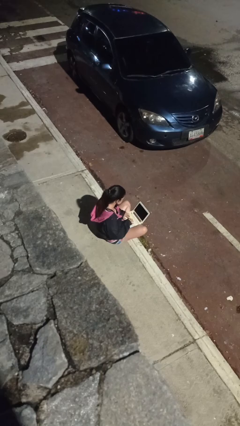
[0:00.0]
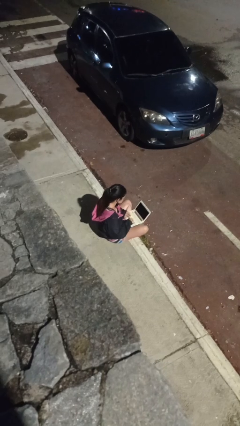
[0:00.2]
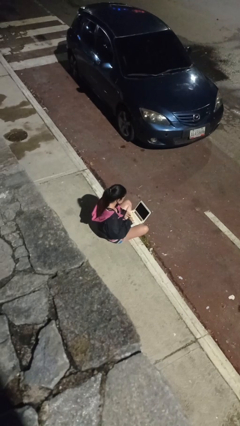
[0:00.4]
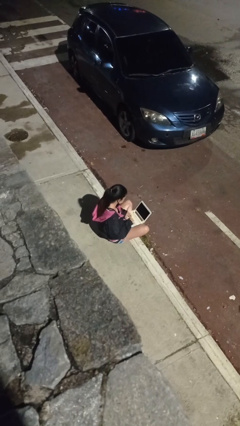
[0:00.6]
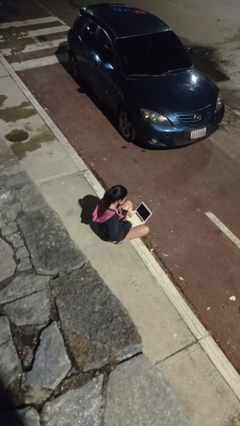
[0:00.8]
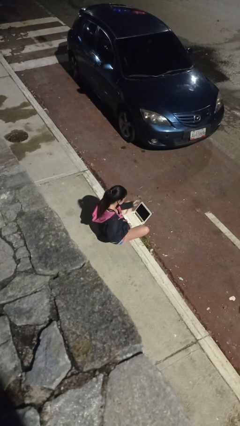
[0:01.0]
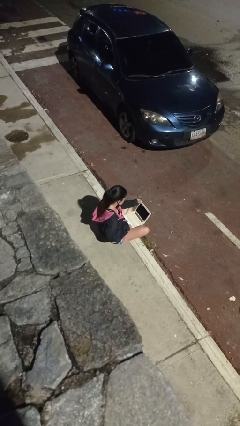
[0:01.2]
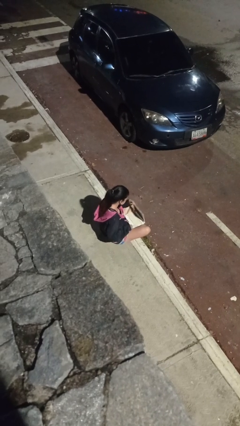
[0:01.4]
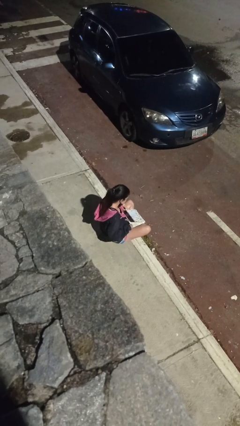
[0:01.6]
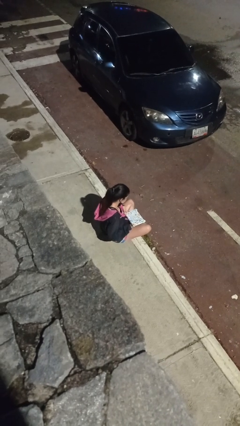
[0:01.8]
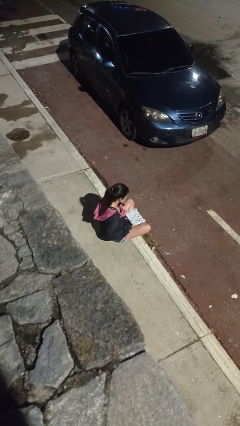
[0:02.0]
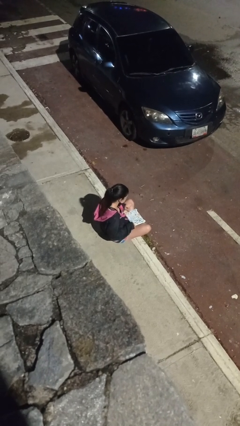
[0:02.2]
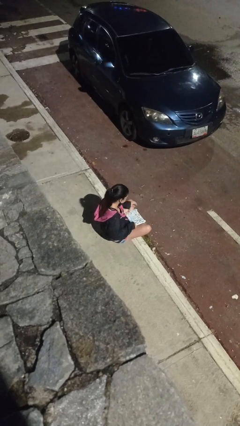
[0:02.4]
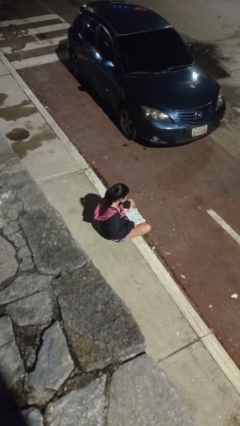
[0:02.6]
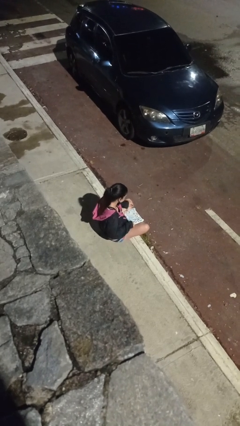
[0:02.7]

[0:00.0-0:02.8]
person closes laptop

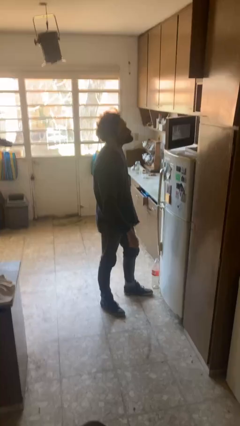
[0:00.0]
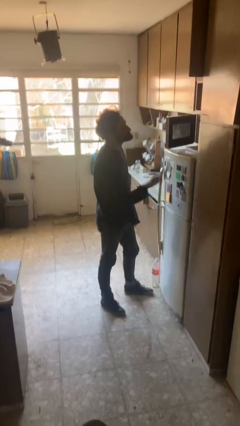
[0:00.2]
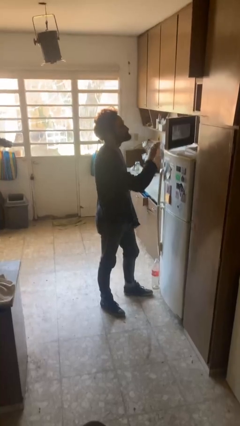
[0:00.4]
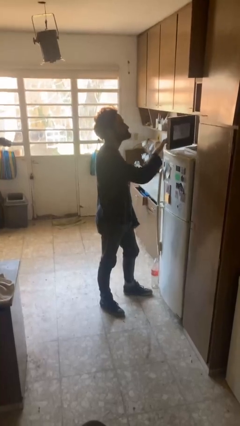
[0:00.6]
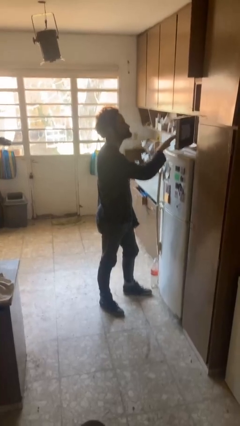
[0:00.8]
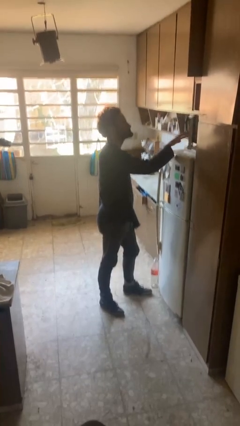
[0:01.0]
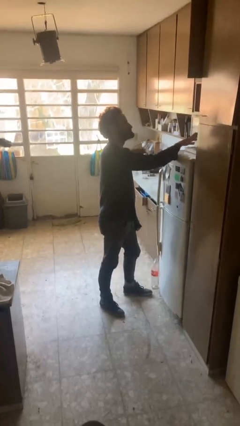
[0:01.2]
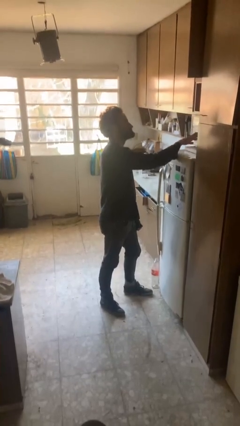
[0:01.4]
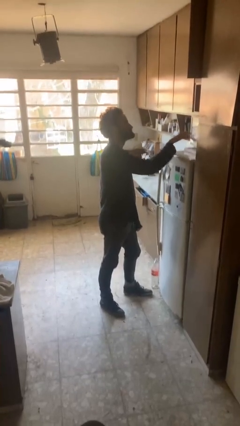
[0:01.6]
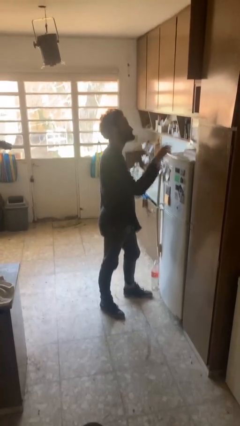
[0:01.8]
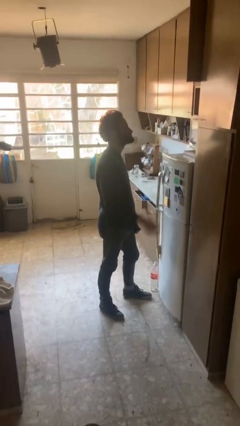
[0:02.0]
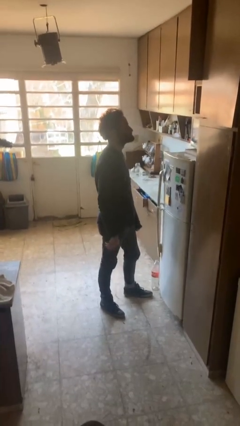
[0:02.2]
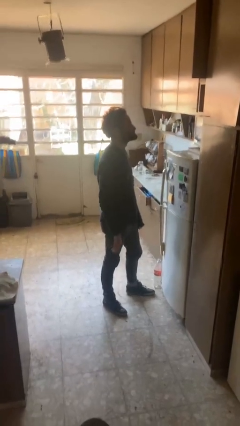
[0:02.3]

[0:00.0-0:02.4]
person closes microwave

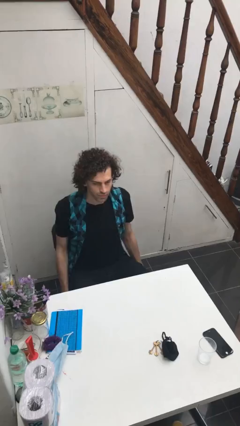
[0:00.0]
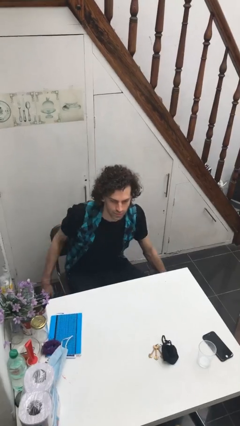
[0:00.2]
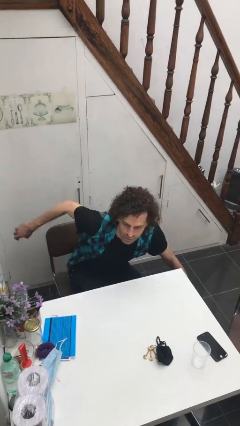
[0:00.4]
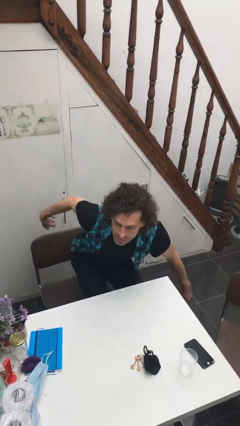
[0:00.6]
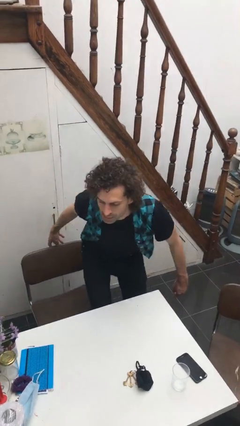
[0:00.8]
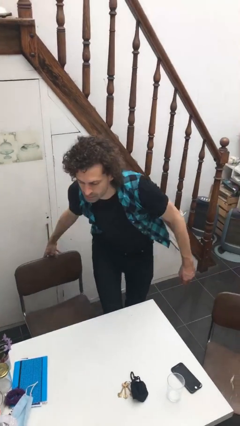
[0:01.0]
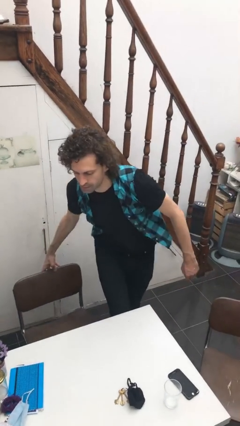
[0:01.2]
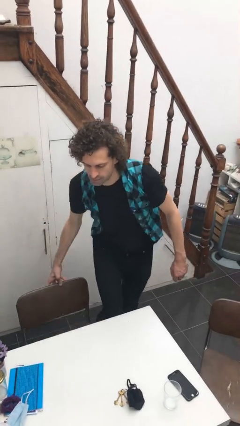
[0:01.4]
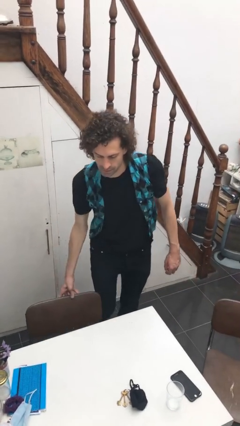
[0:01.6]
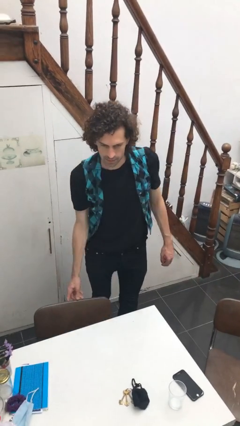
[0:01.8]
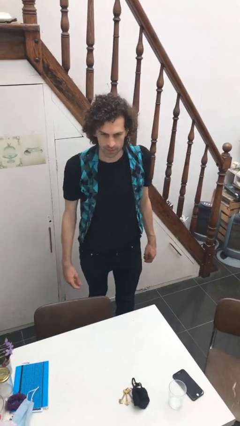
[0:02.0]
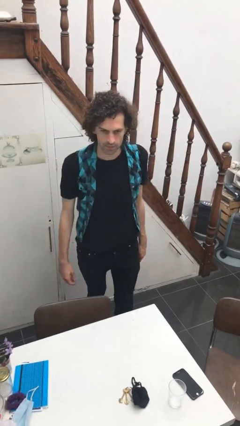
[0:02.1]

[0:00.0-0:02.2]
person stands up

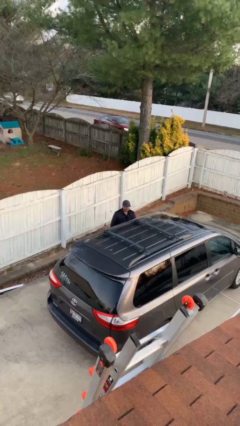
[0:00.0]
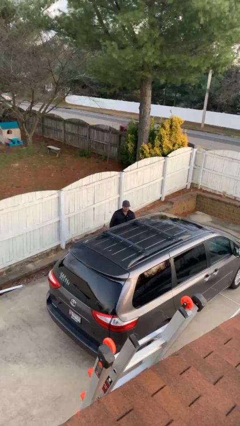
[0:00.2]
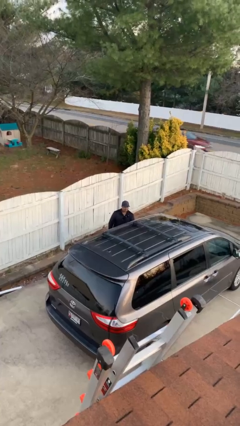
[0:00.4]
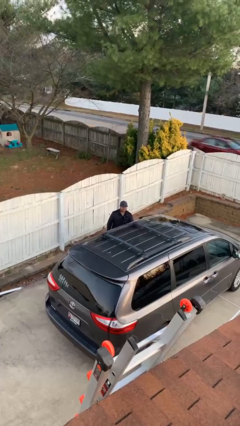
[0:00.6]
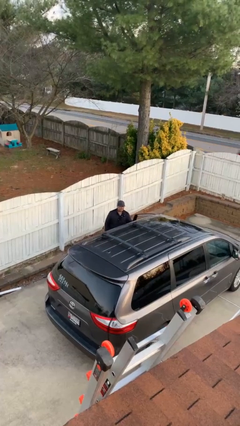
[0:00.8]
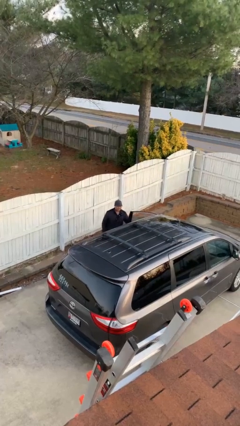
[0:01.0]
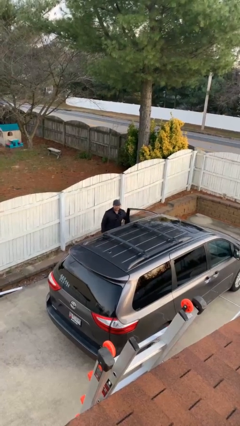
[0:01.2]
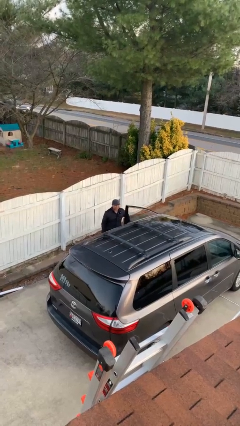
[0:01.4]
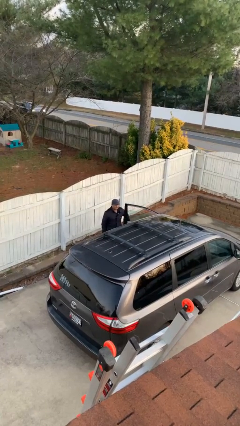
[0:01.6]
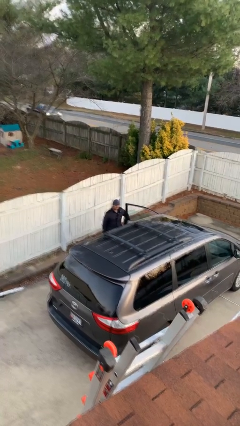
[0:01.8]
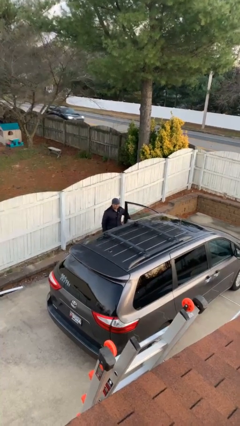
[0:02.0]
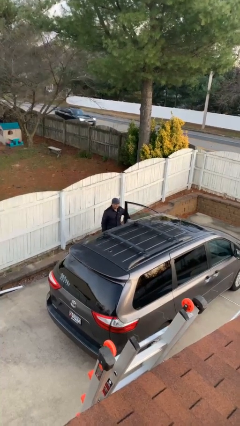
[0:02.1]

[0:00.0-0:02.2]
person opens car door

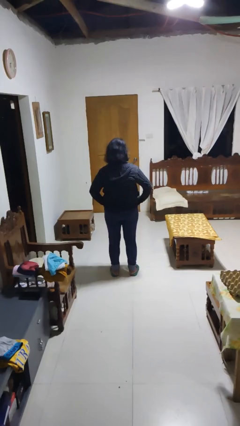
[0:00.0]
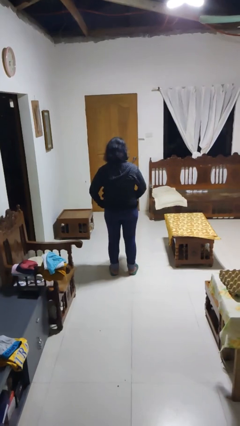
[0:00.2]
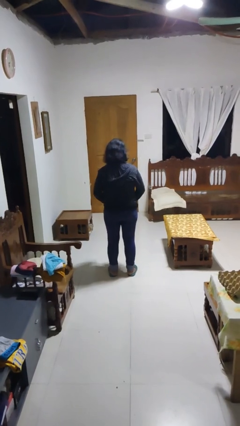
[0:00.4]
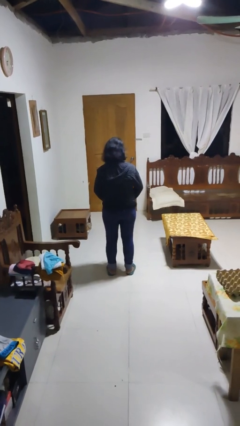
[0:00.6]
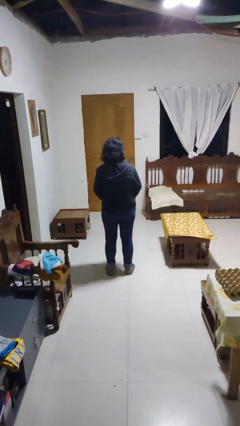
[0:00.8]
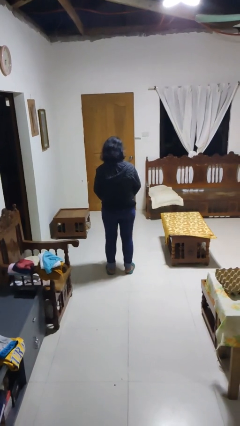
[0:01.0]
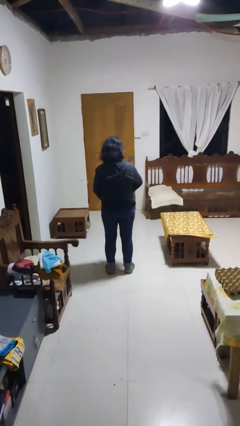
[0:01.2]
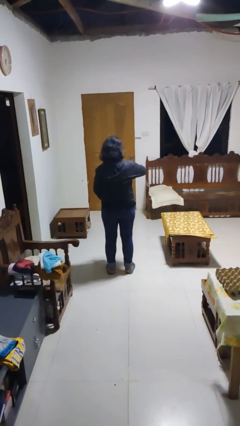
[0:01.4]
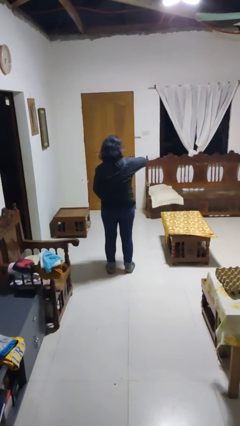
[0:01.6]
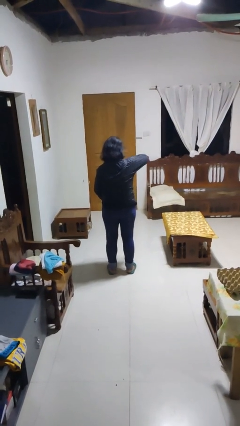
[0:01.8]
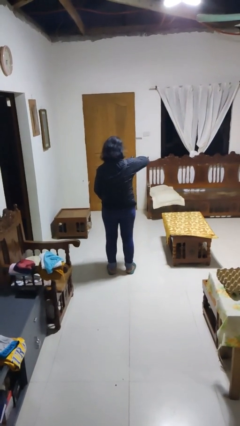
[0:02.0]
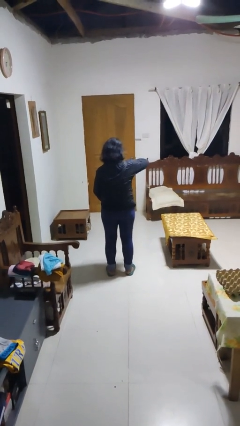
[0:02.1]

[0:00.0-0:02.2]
person zips up jacket

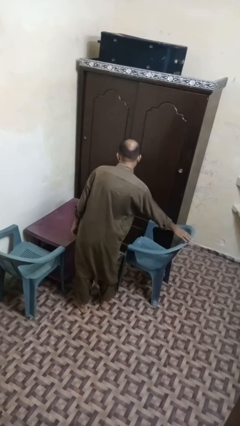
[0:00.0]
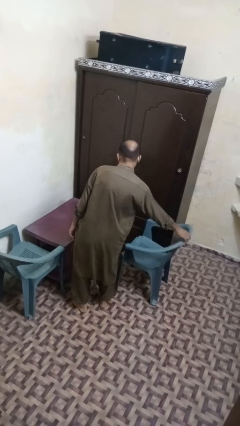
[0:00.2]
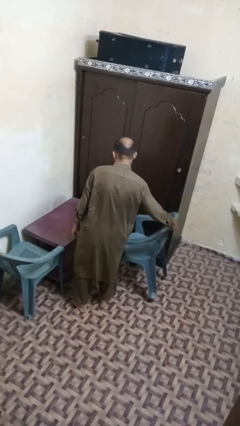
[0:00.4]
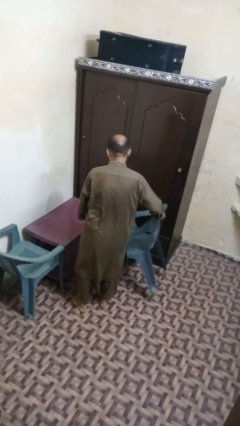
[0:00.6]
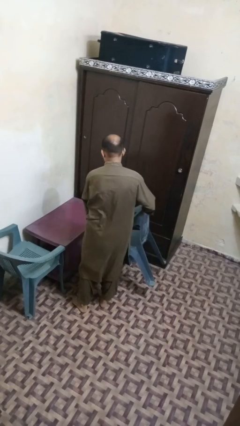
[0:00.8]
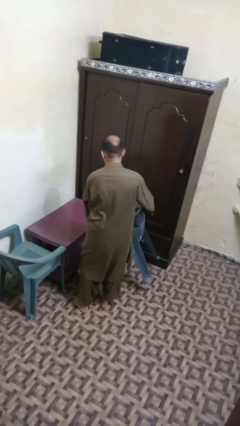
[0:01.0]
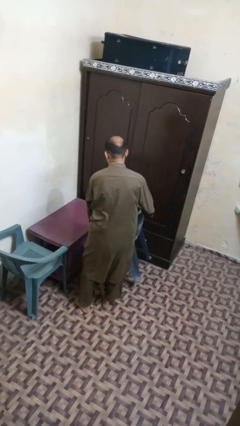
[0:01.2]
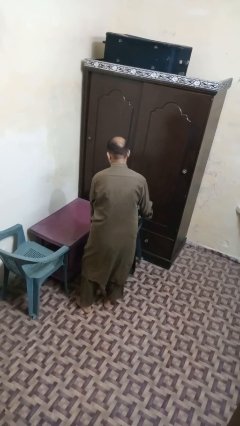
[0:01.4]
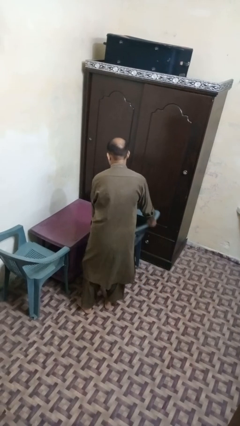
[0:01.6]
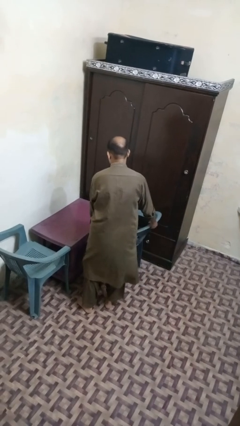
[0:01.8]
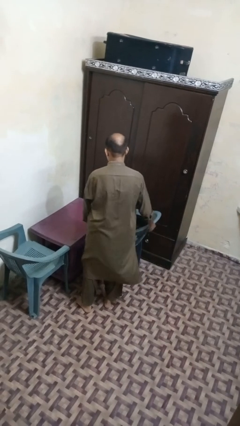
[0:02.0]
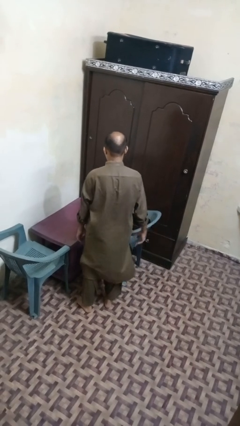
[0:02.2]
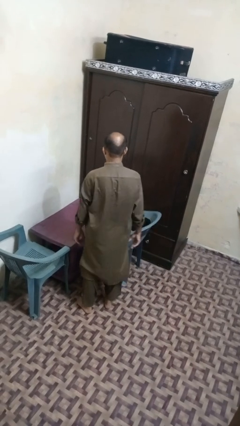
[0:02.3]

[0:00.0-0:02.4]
person pushes in chair

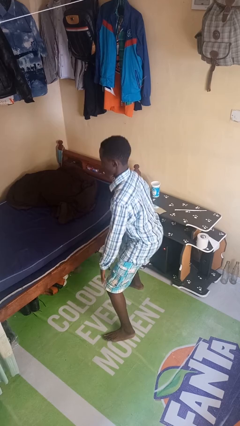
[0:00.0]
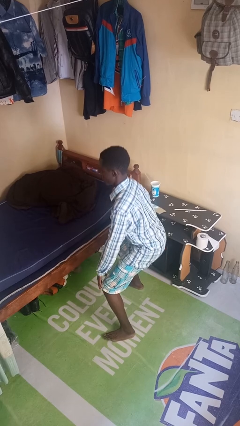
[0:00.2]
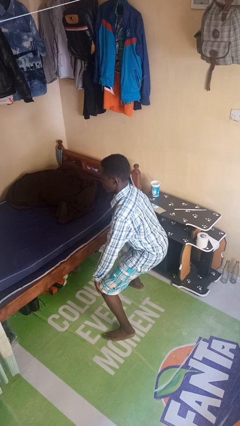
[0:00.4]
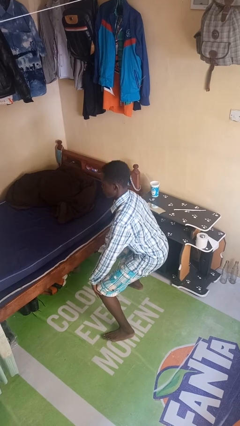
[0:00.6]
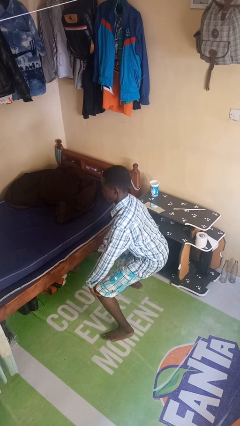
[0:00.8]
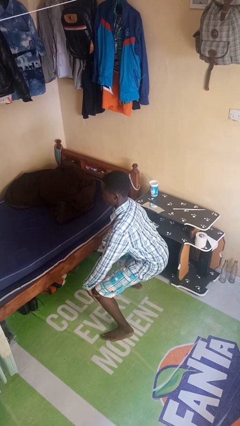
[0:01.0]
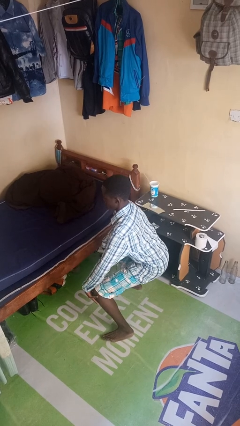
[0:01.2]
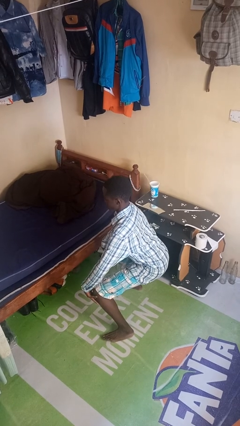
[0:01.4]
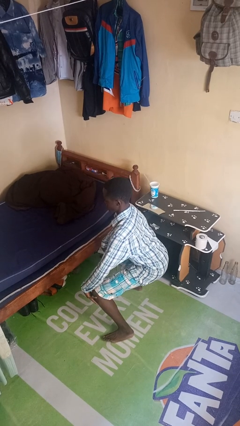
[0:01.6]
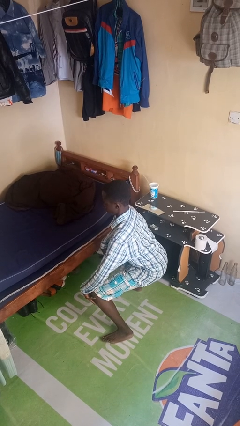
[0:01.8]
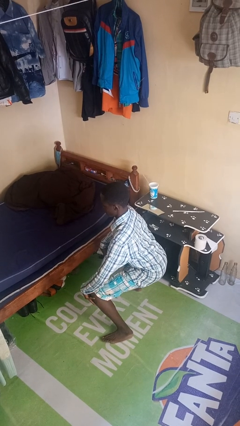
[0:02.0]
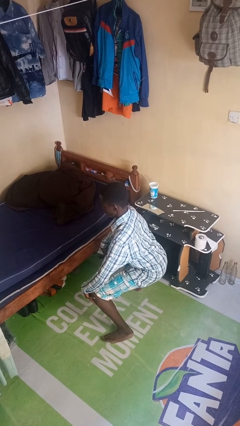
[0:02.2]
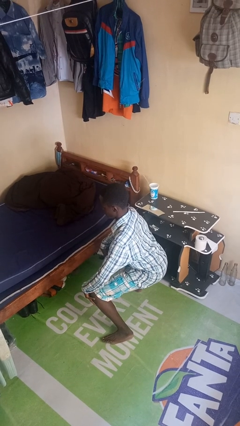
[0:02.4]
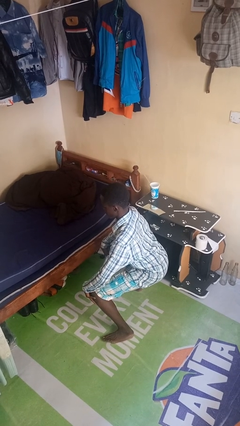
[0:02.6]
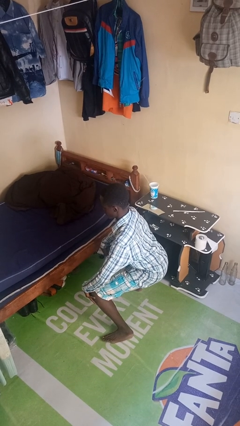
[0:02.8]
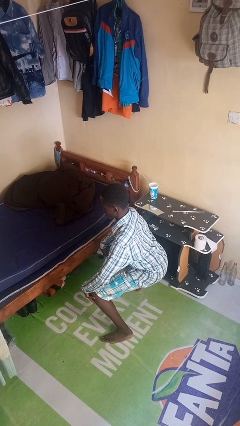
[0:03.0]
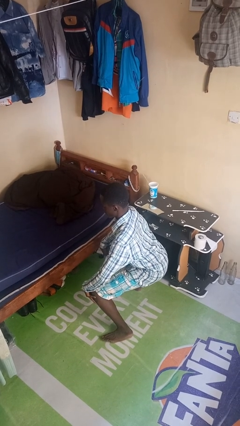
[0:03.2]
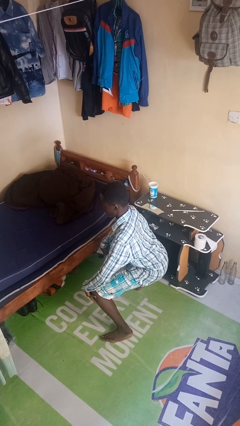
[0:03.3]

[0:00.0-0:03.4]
person squats
